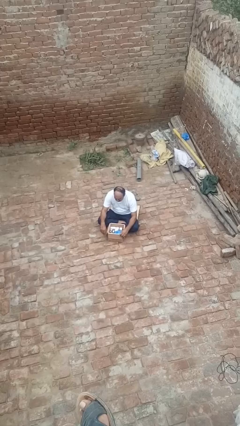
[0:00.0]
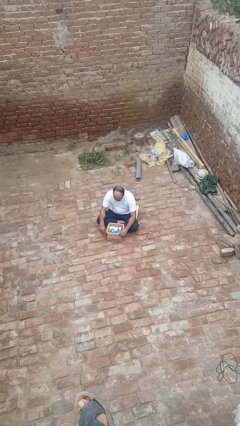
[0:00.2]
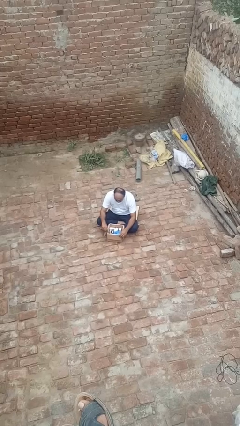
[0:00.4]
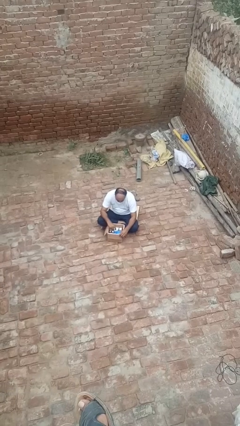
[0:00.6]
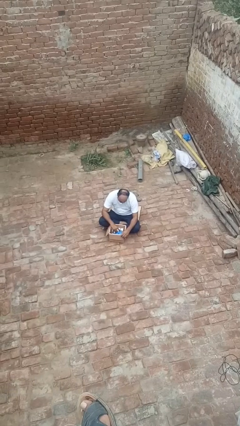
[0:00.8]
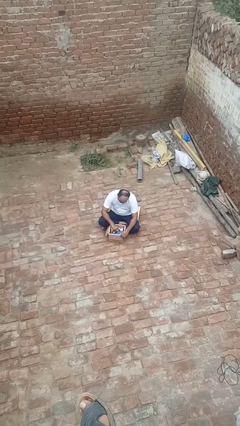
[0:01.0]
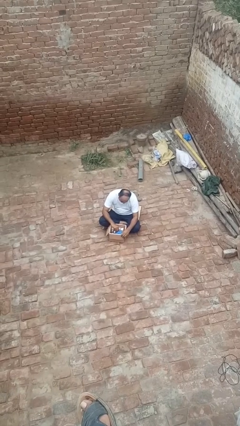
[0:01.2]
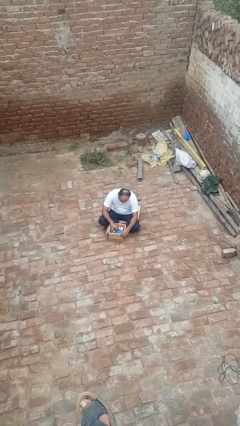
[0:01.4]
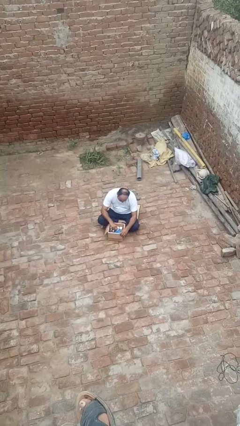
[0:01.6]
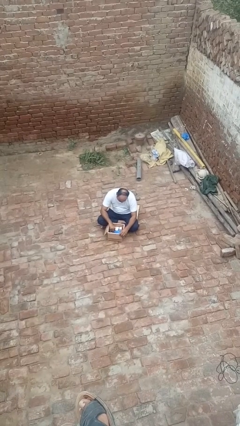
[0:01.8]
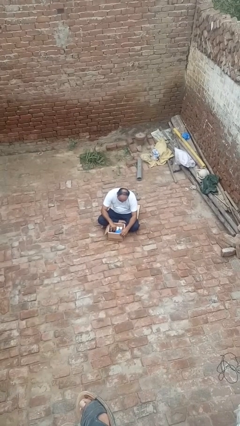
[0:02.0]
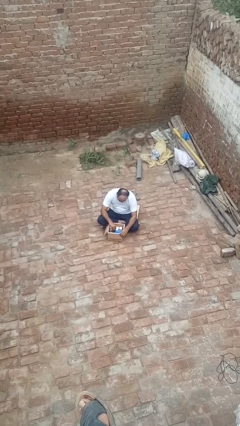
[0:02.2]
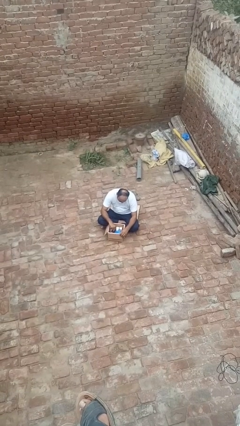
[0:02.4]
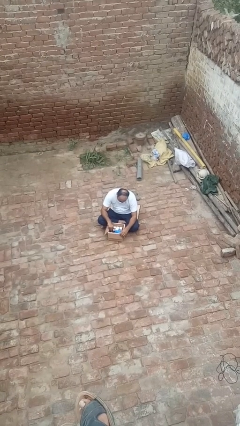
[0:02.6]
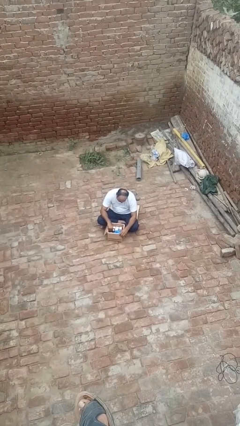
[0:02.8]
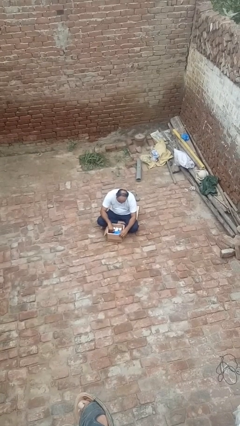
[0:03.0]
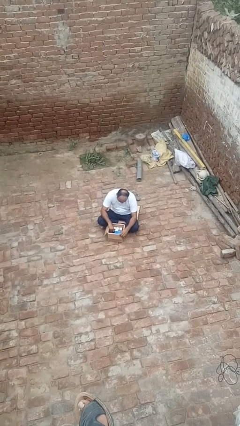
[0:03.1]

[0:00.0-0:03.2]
person searches in box

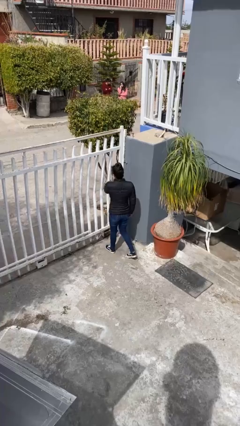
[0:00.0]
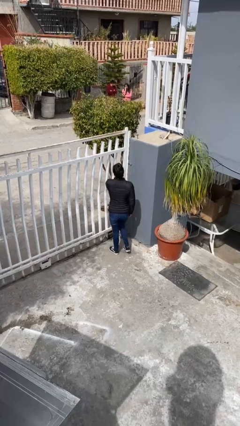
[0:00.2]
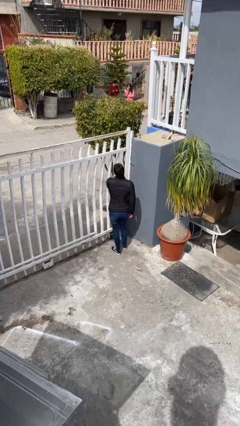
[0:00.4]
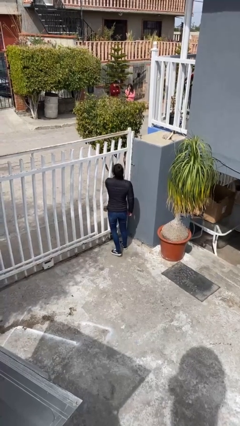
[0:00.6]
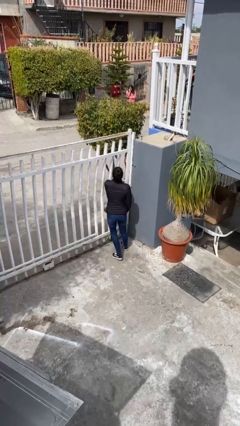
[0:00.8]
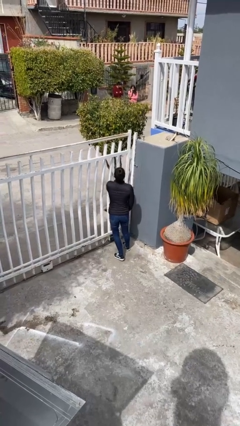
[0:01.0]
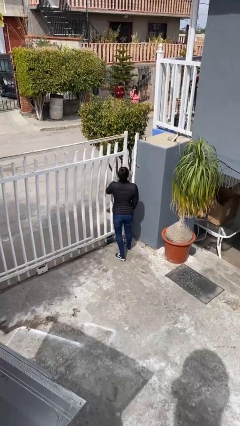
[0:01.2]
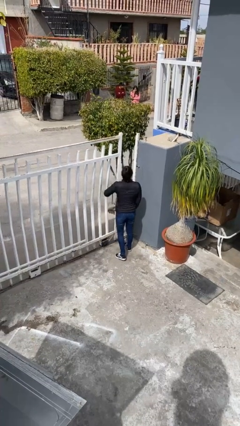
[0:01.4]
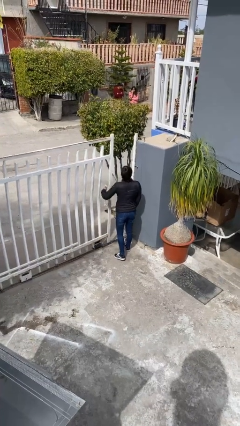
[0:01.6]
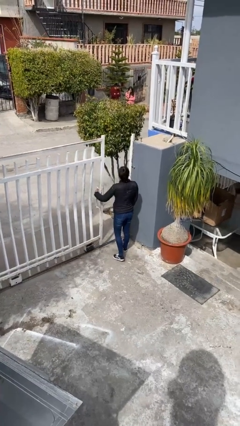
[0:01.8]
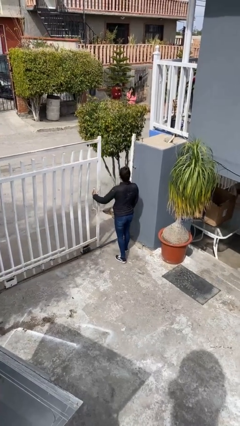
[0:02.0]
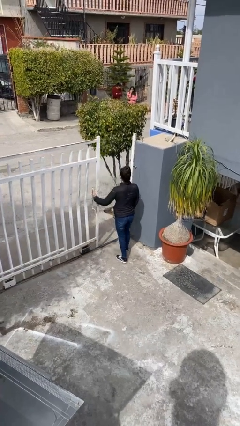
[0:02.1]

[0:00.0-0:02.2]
person opens facility door

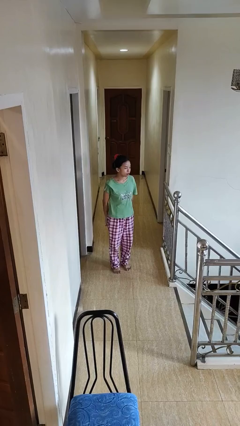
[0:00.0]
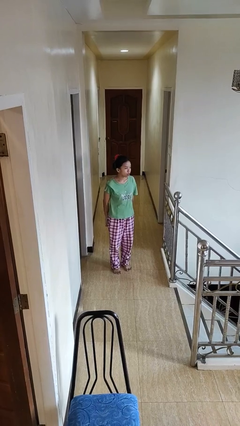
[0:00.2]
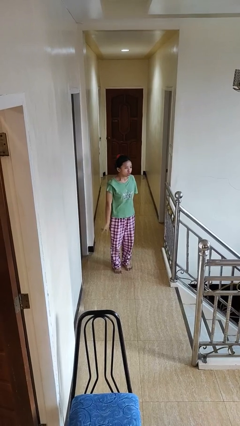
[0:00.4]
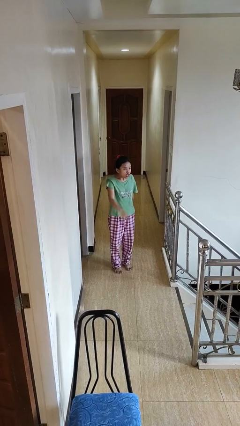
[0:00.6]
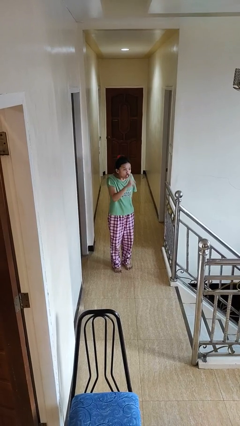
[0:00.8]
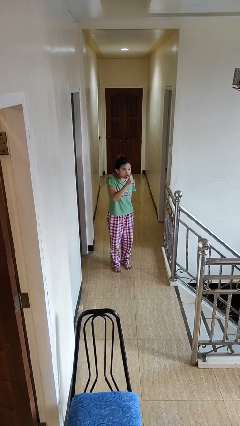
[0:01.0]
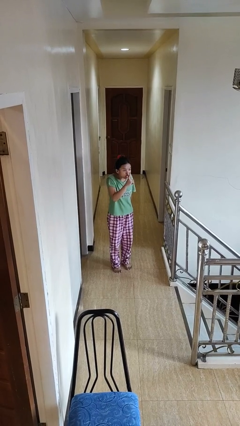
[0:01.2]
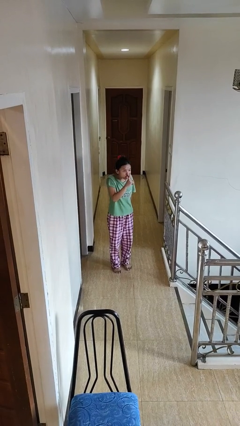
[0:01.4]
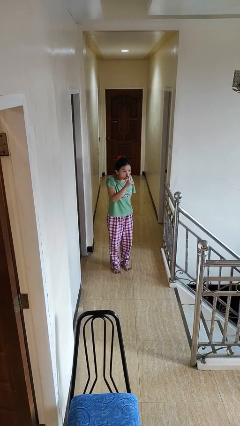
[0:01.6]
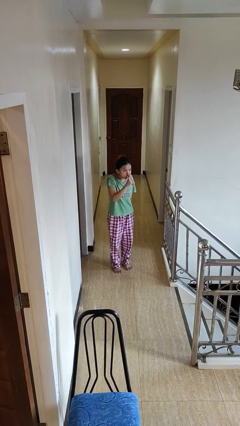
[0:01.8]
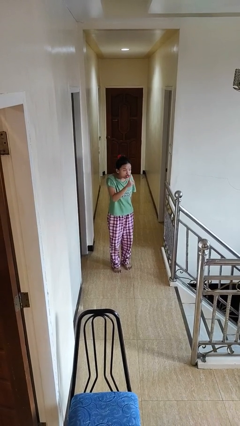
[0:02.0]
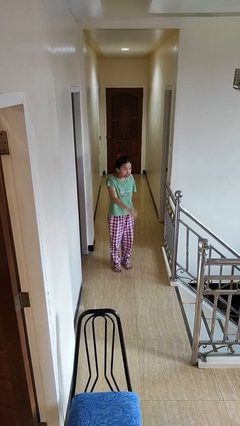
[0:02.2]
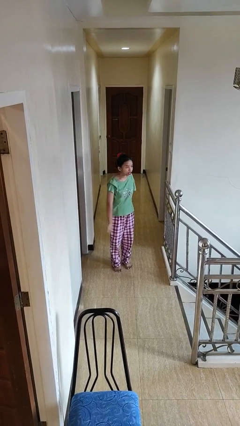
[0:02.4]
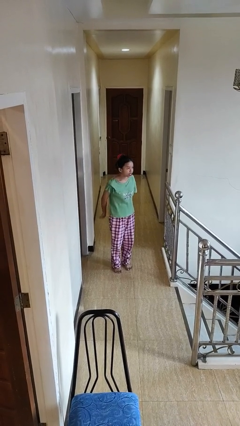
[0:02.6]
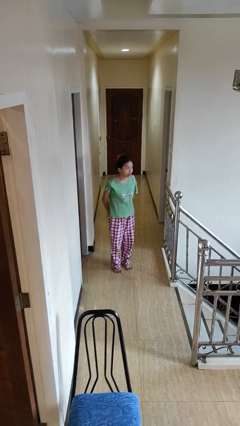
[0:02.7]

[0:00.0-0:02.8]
person gestures be quiet

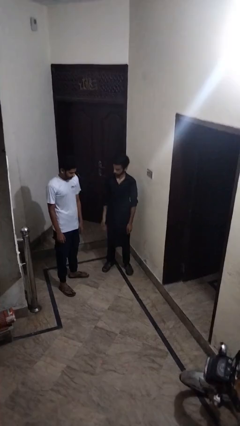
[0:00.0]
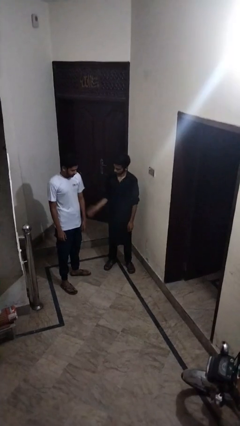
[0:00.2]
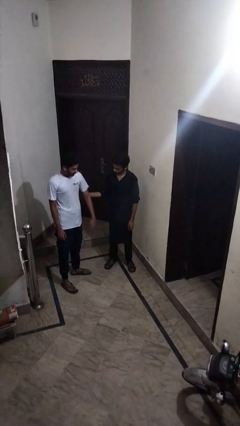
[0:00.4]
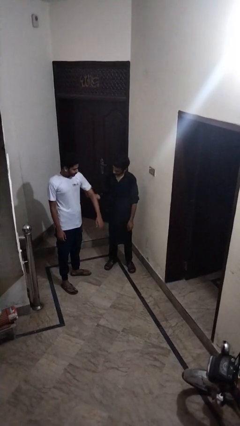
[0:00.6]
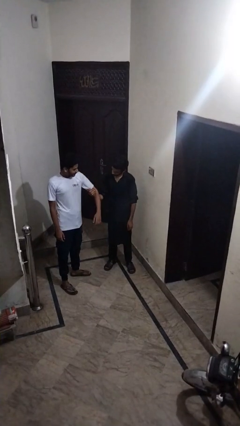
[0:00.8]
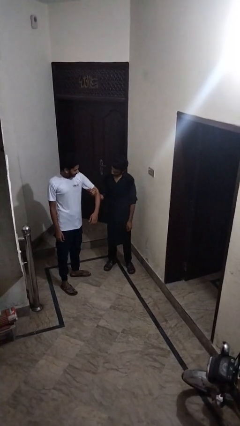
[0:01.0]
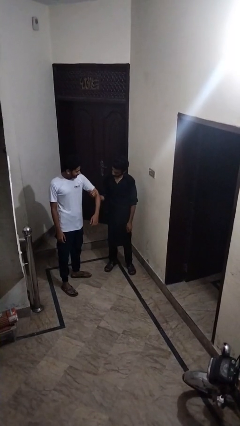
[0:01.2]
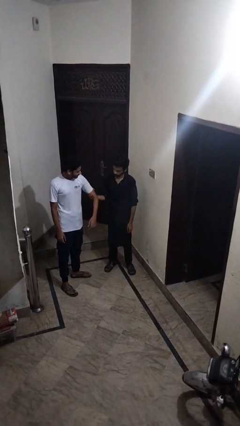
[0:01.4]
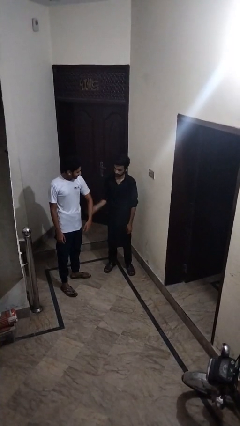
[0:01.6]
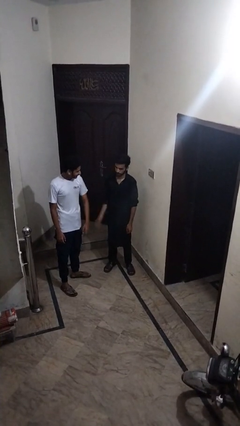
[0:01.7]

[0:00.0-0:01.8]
person grabs person by bicep

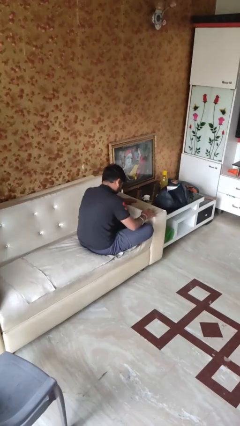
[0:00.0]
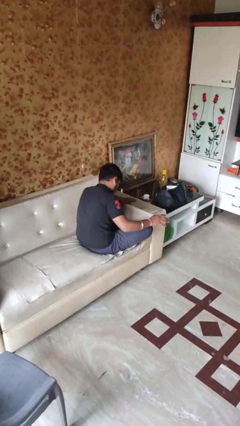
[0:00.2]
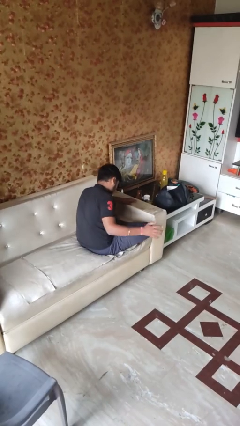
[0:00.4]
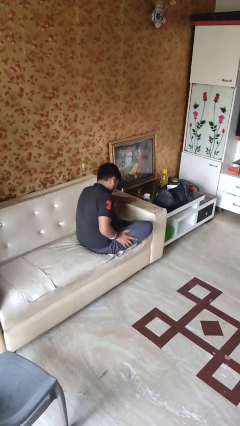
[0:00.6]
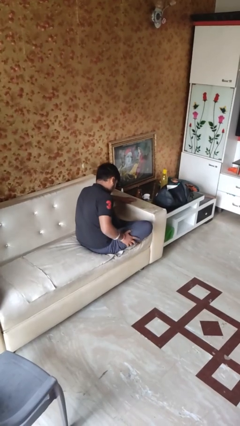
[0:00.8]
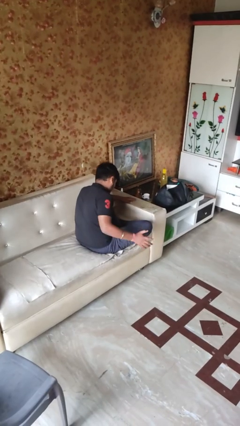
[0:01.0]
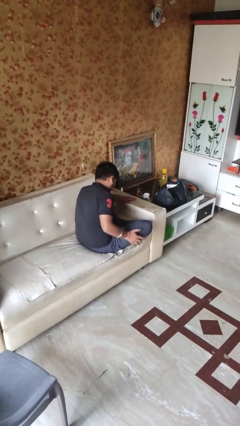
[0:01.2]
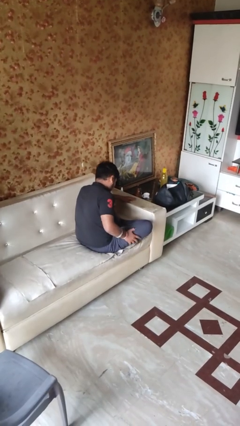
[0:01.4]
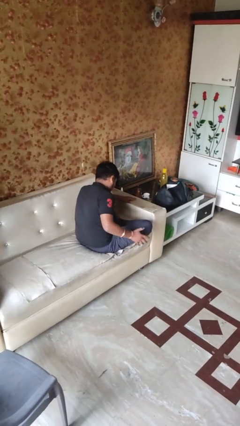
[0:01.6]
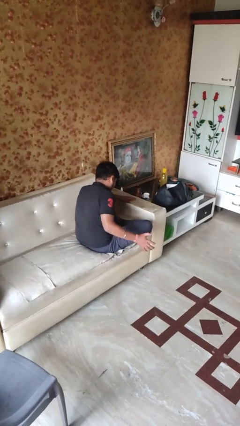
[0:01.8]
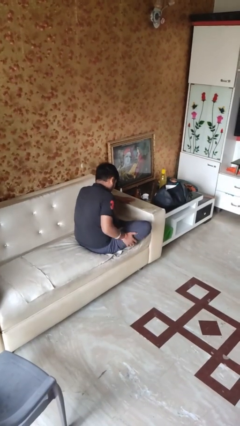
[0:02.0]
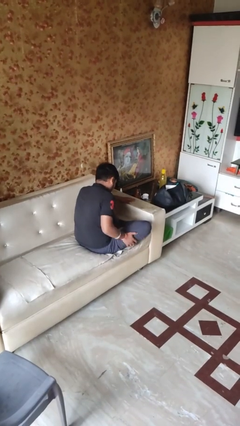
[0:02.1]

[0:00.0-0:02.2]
person slaps hands on thighs

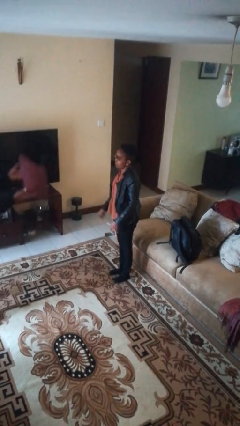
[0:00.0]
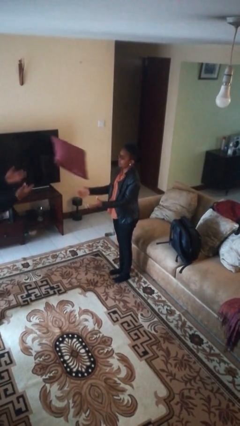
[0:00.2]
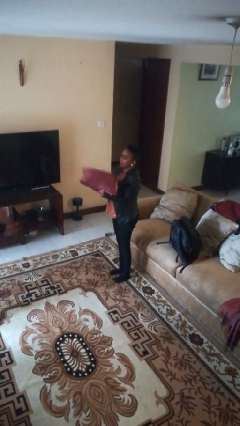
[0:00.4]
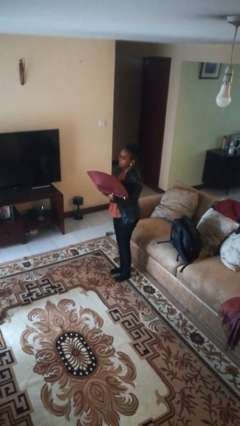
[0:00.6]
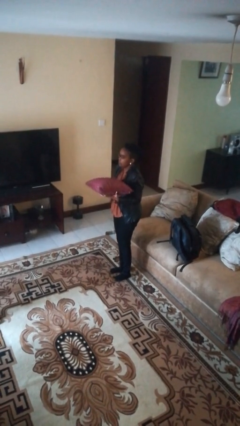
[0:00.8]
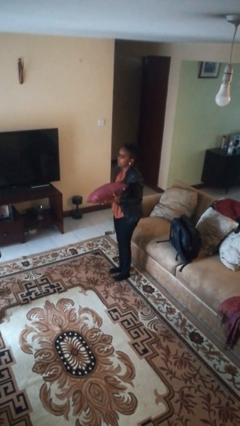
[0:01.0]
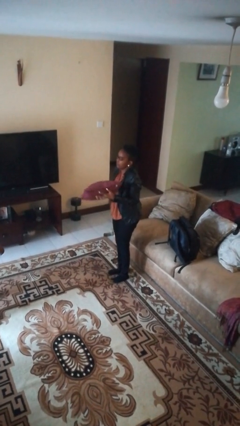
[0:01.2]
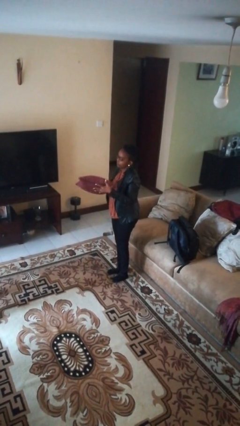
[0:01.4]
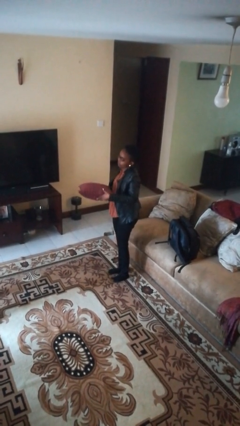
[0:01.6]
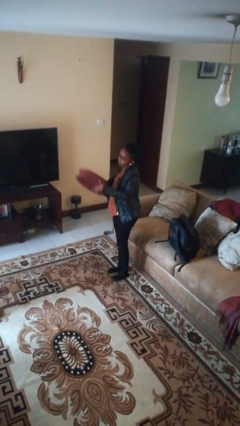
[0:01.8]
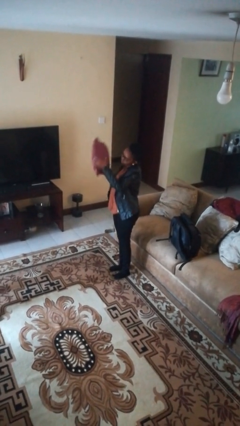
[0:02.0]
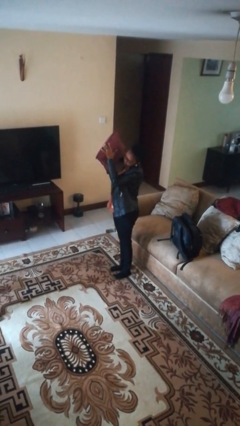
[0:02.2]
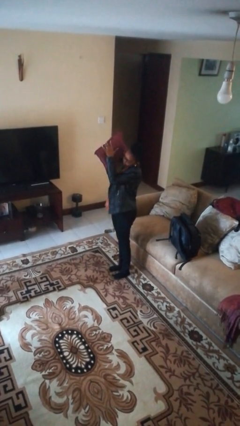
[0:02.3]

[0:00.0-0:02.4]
person catches object from person

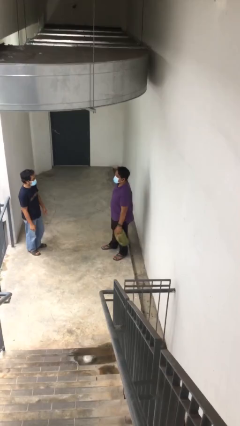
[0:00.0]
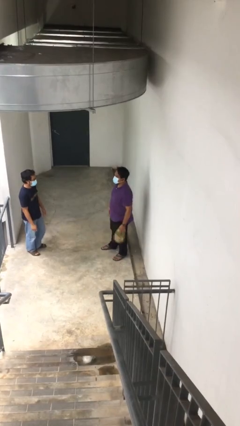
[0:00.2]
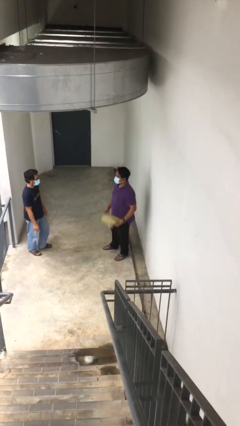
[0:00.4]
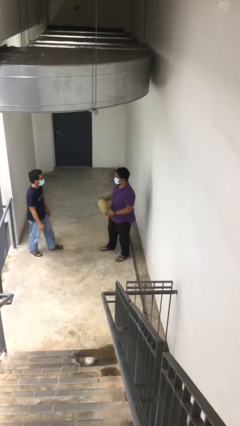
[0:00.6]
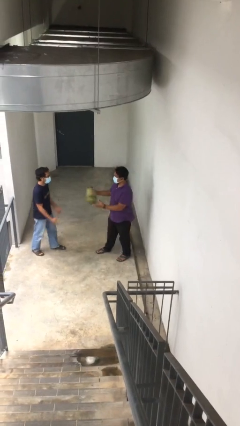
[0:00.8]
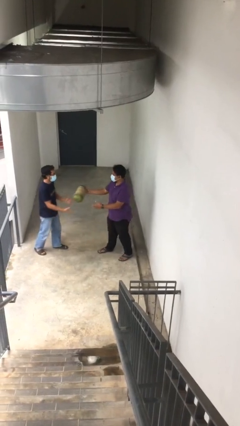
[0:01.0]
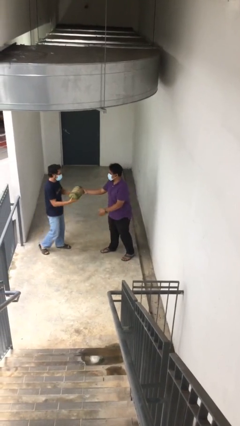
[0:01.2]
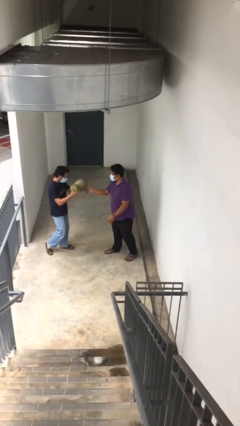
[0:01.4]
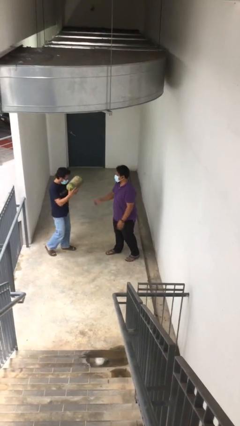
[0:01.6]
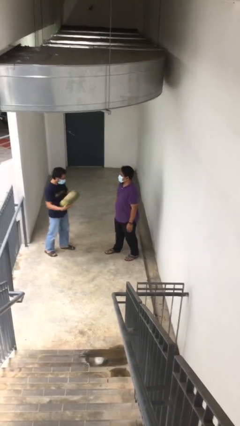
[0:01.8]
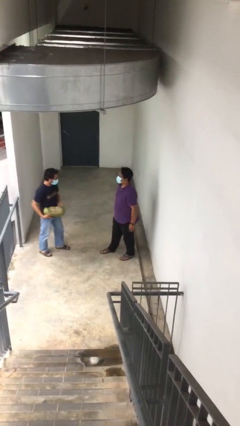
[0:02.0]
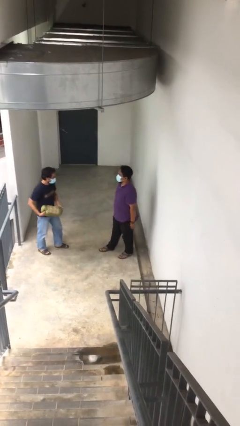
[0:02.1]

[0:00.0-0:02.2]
person transfers object to person

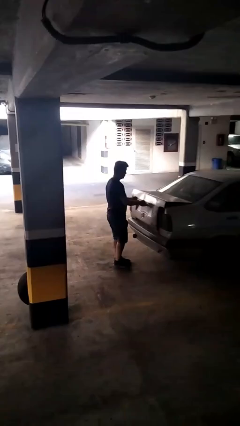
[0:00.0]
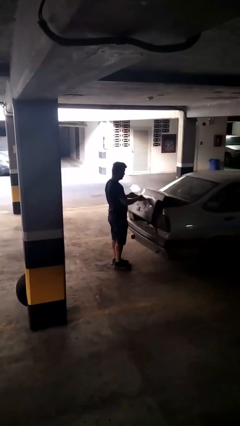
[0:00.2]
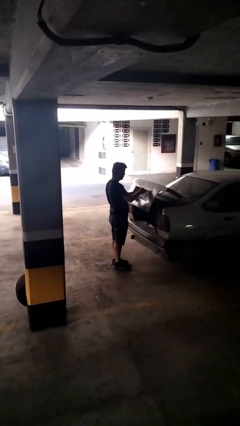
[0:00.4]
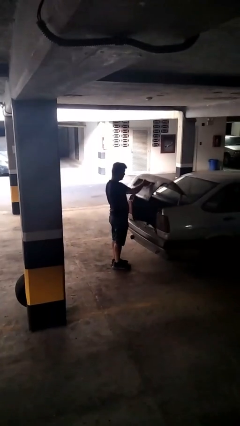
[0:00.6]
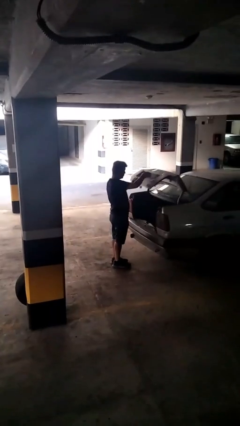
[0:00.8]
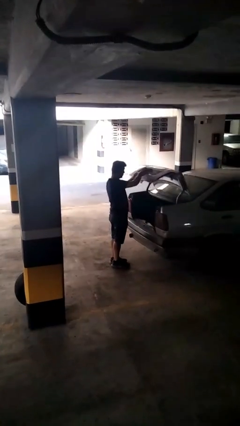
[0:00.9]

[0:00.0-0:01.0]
person opens car trunk
